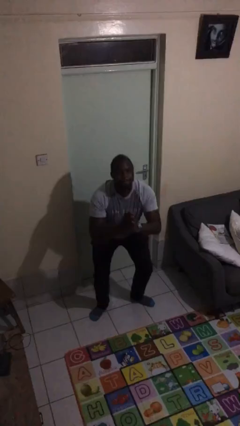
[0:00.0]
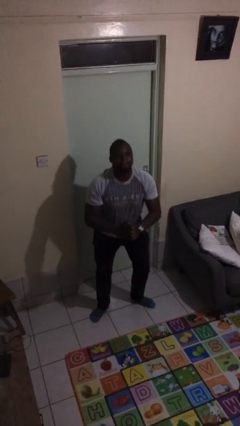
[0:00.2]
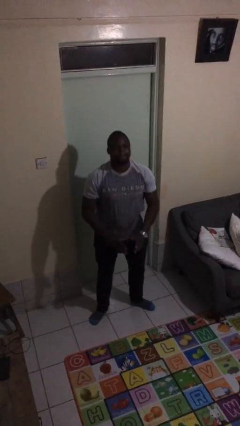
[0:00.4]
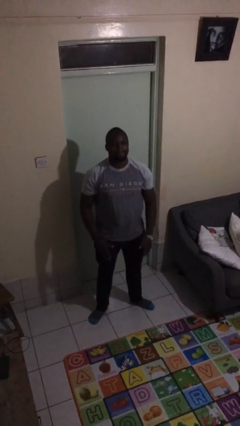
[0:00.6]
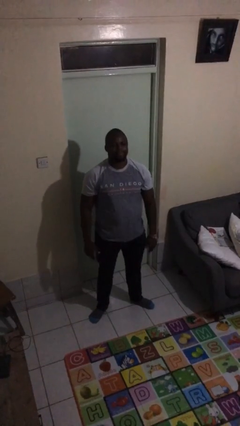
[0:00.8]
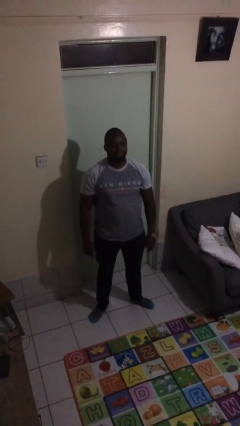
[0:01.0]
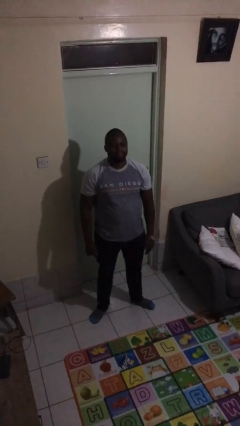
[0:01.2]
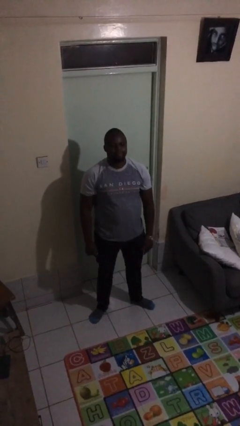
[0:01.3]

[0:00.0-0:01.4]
person stands up

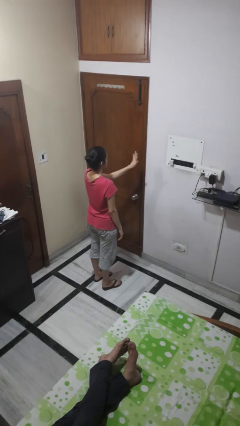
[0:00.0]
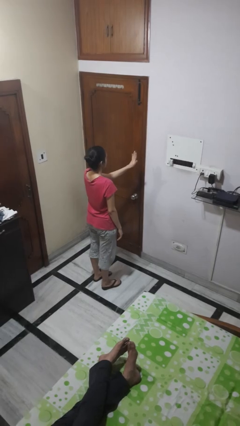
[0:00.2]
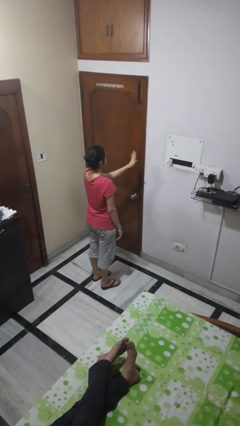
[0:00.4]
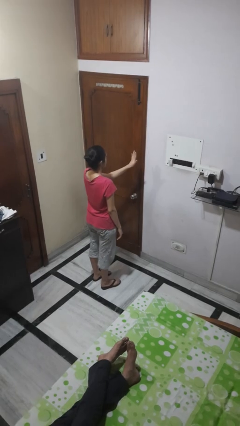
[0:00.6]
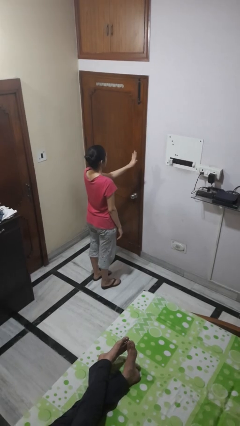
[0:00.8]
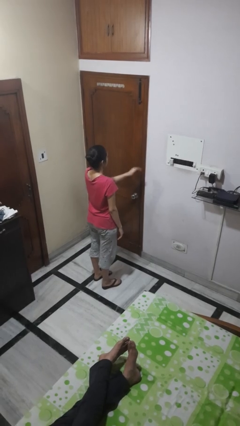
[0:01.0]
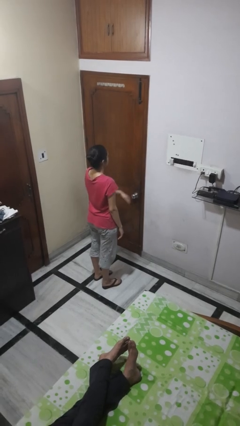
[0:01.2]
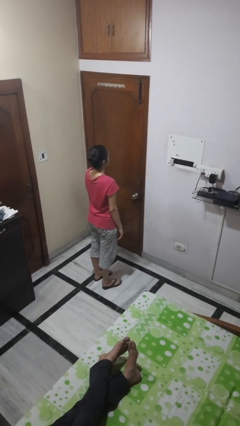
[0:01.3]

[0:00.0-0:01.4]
person gestures stop

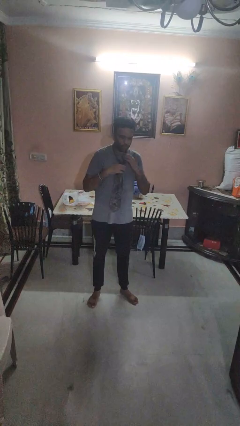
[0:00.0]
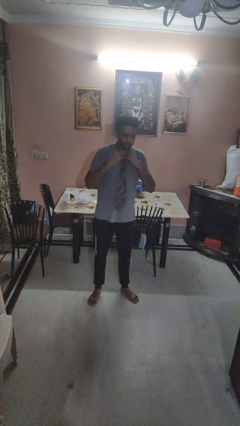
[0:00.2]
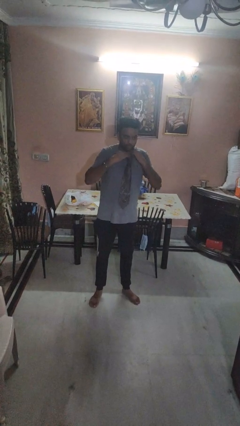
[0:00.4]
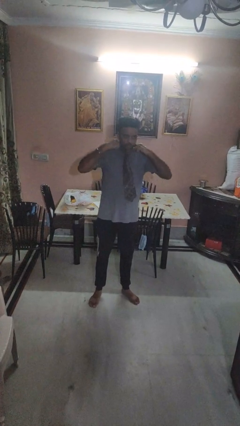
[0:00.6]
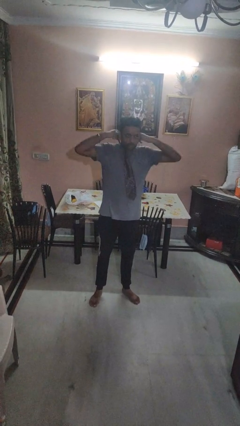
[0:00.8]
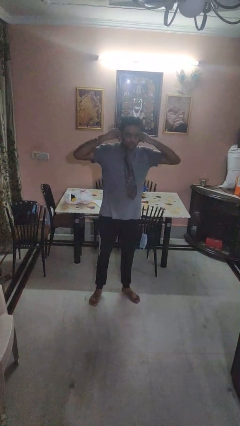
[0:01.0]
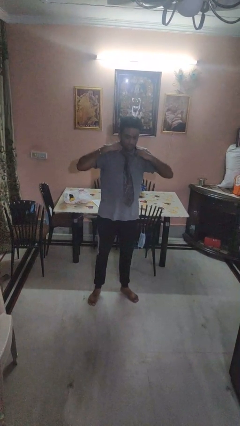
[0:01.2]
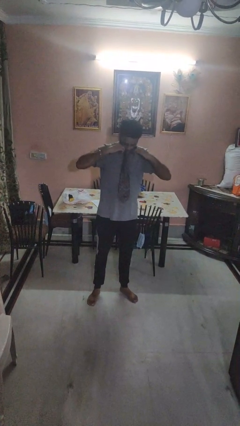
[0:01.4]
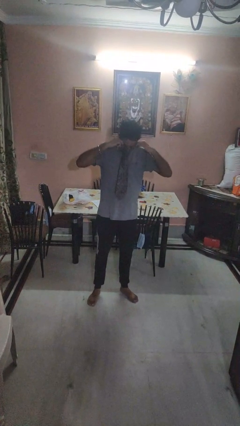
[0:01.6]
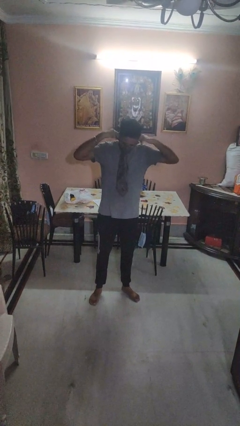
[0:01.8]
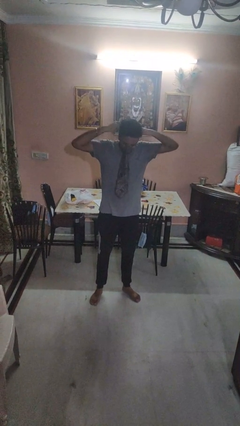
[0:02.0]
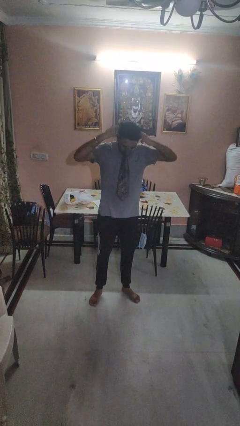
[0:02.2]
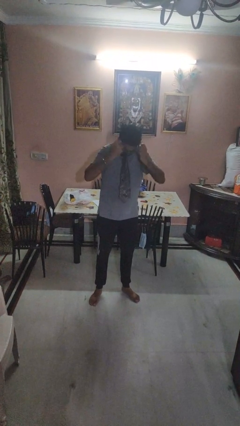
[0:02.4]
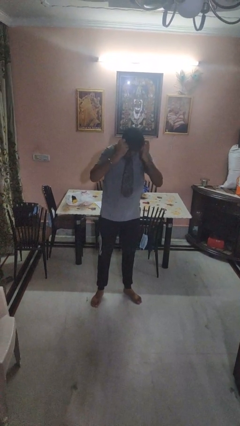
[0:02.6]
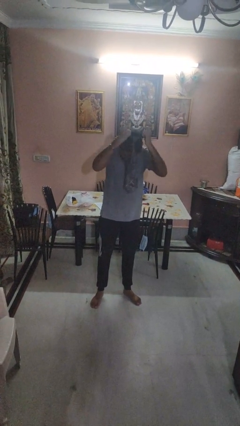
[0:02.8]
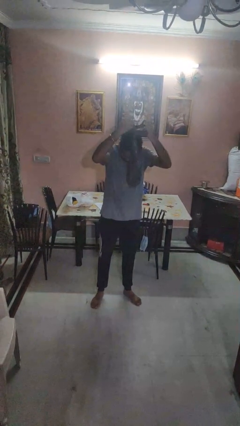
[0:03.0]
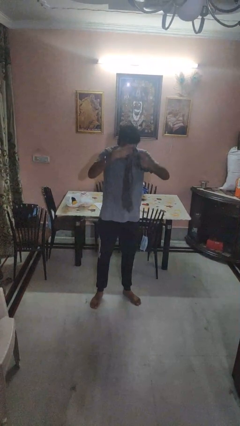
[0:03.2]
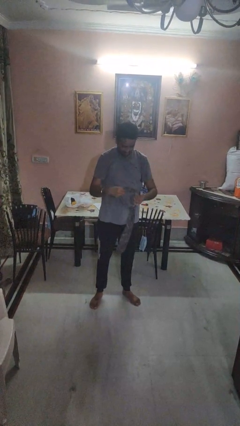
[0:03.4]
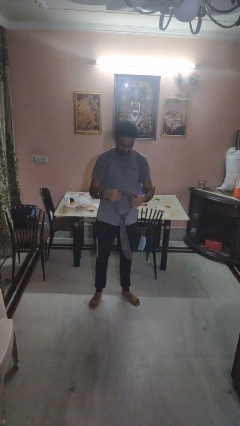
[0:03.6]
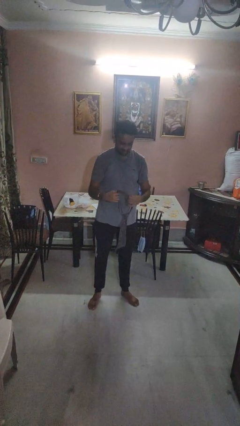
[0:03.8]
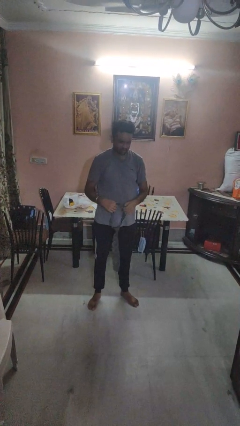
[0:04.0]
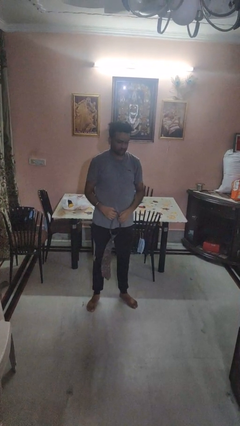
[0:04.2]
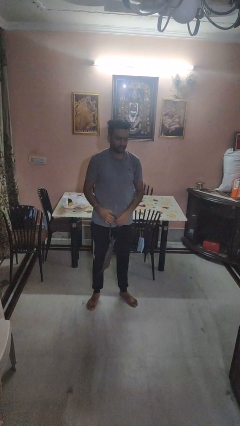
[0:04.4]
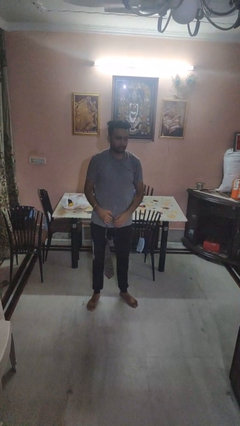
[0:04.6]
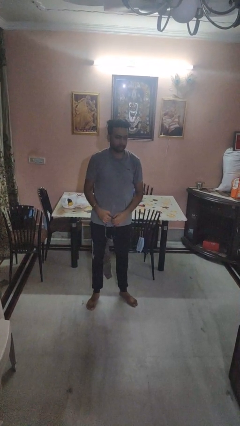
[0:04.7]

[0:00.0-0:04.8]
person takes off necktie

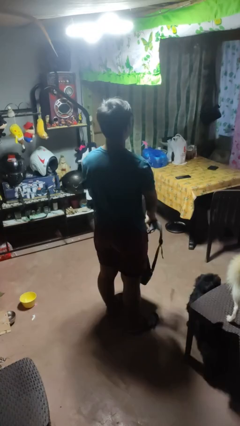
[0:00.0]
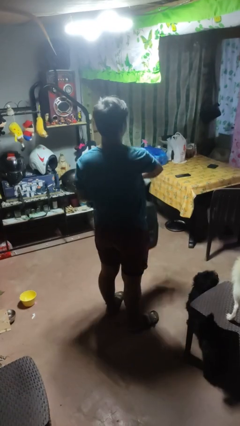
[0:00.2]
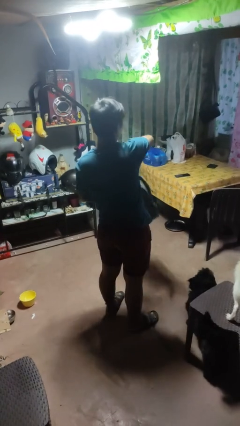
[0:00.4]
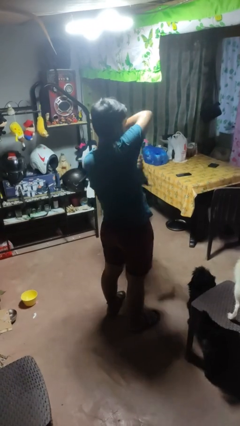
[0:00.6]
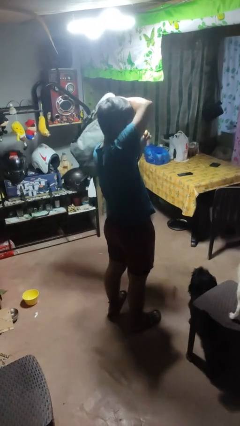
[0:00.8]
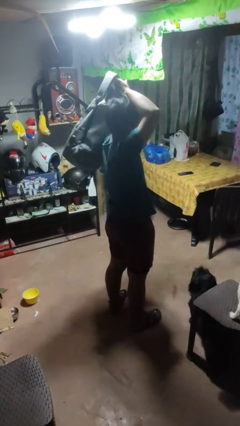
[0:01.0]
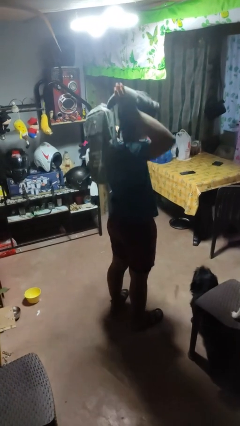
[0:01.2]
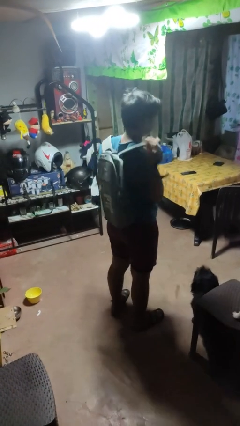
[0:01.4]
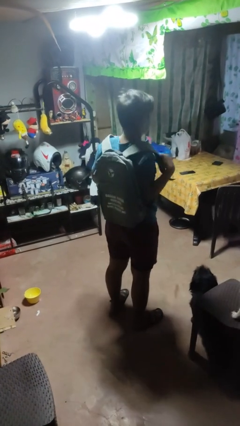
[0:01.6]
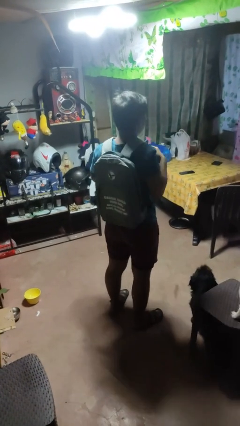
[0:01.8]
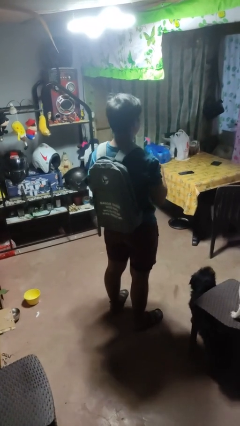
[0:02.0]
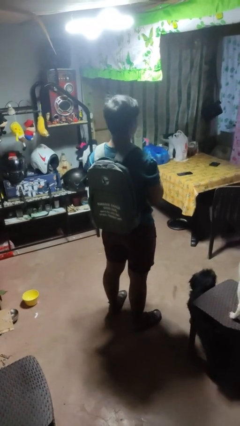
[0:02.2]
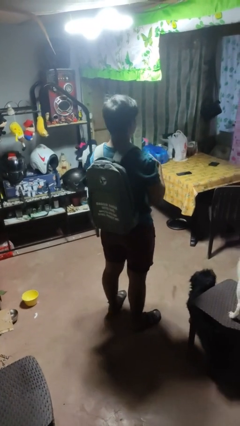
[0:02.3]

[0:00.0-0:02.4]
person puts on backpack

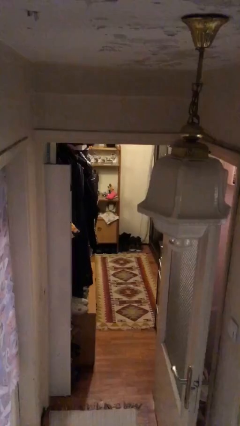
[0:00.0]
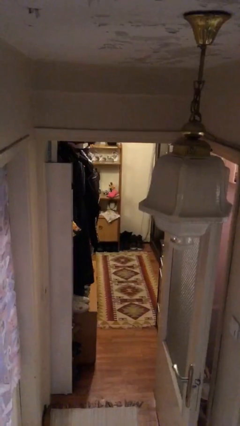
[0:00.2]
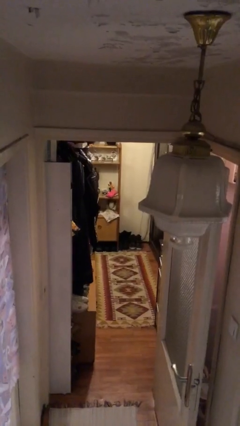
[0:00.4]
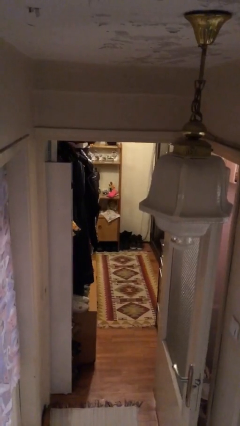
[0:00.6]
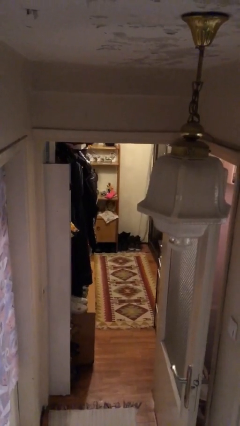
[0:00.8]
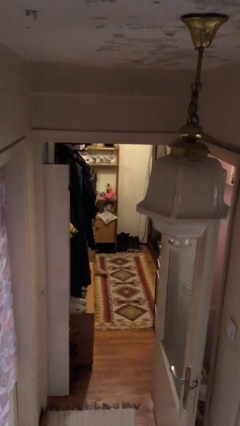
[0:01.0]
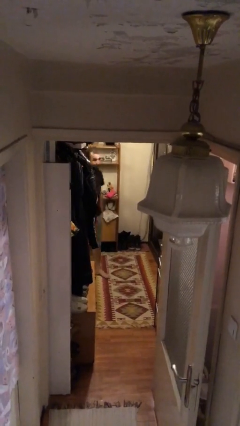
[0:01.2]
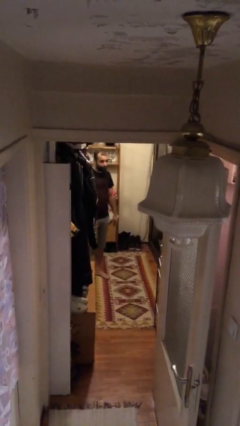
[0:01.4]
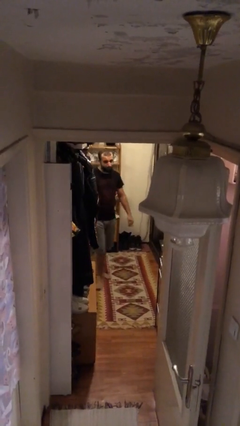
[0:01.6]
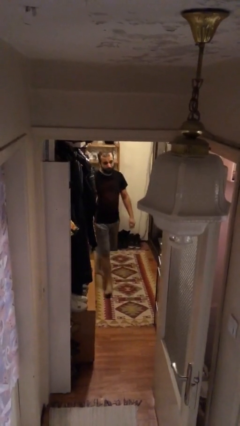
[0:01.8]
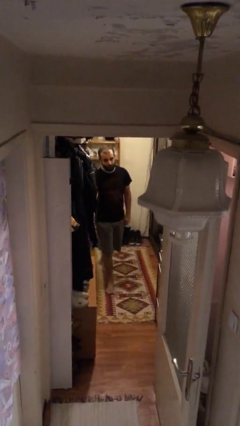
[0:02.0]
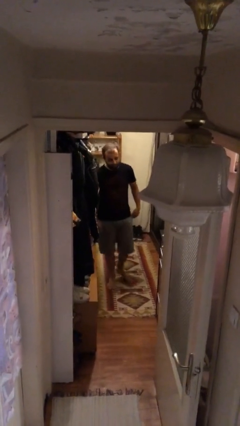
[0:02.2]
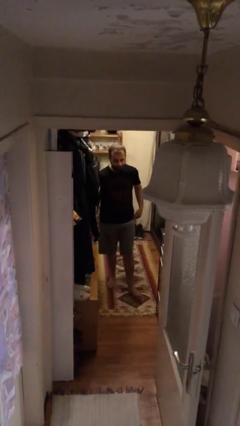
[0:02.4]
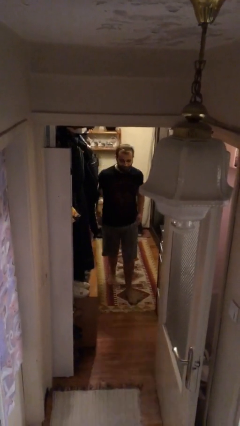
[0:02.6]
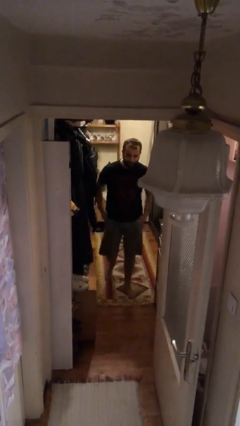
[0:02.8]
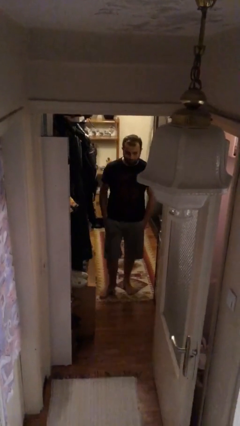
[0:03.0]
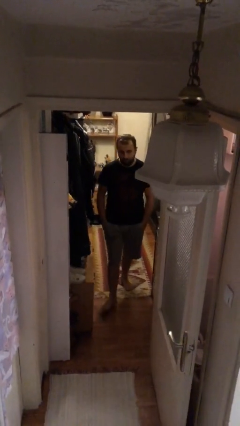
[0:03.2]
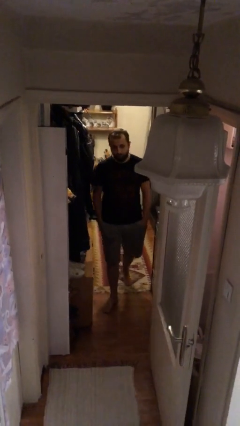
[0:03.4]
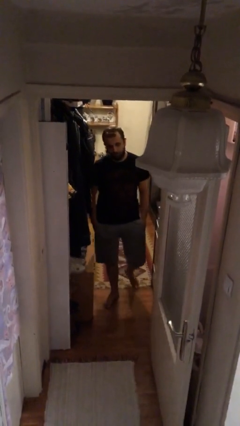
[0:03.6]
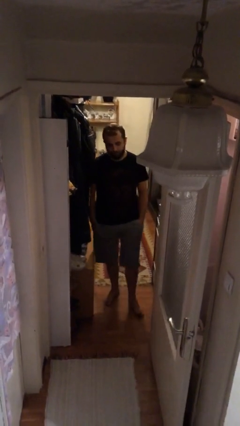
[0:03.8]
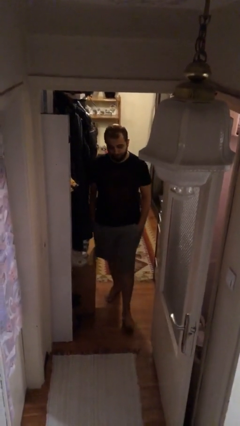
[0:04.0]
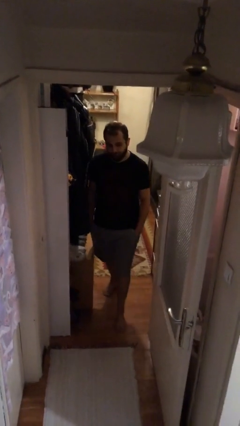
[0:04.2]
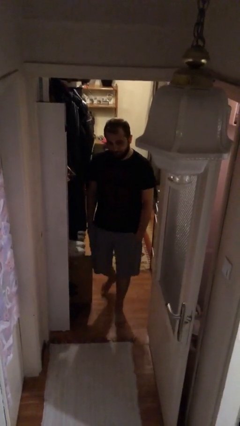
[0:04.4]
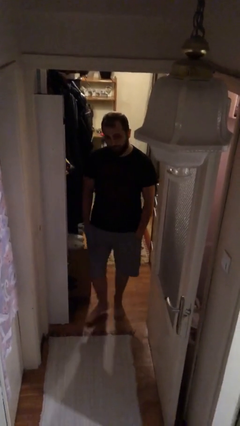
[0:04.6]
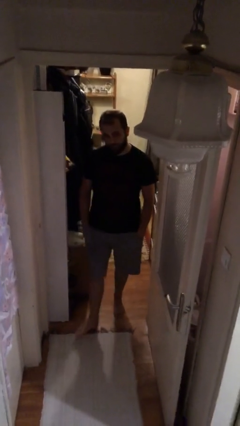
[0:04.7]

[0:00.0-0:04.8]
person enters scene through structure

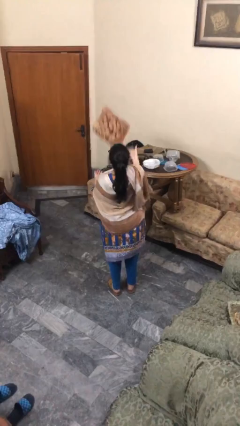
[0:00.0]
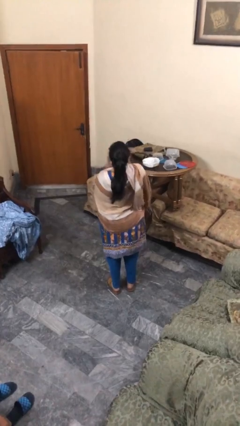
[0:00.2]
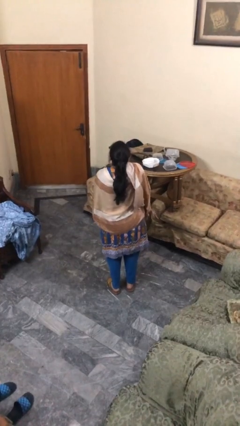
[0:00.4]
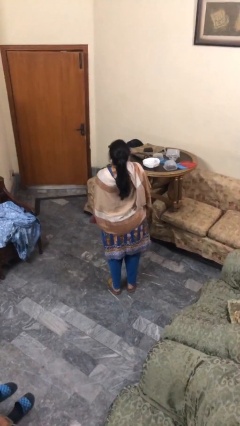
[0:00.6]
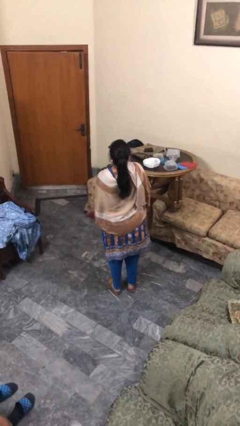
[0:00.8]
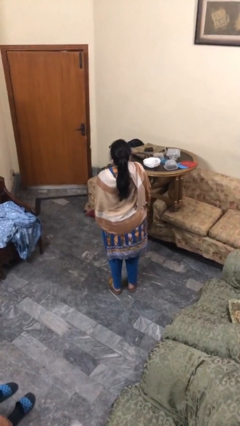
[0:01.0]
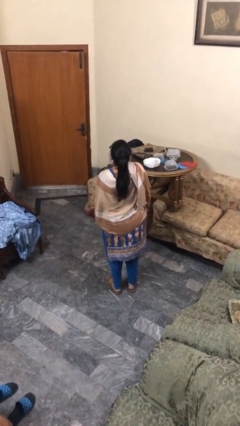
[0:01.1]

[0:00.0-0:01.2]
person catches dropped object

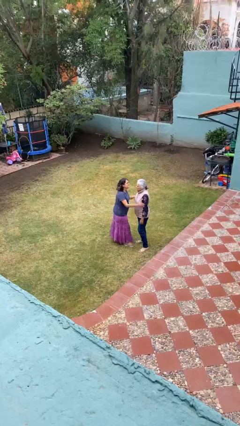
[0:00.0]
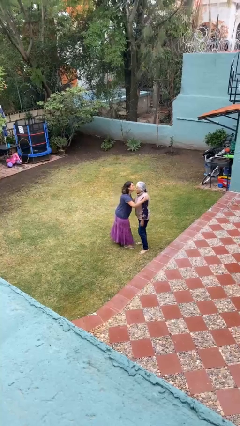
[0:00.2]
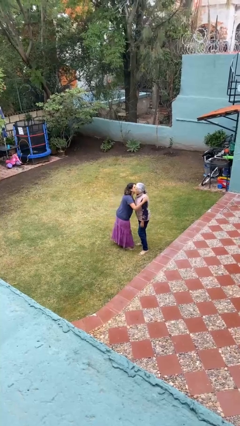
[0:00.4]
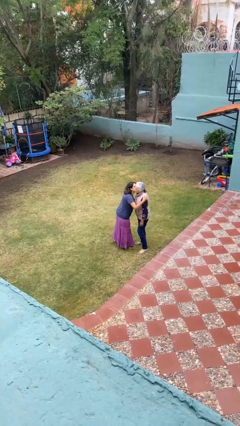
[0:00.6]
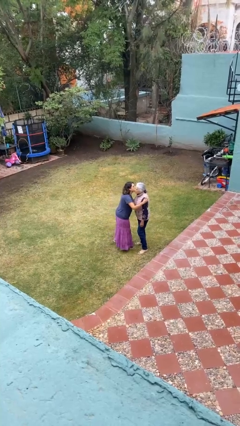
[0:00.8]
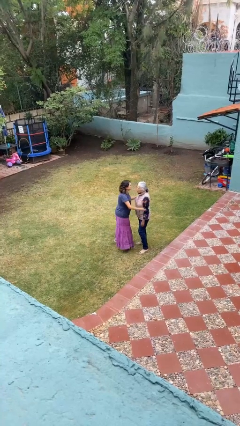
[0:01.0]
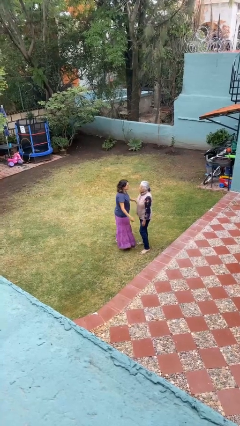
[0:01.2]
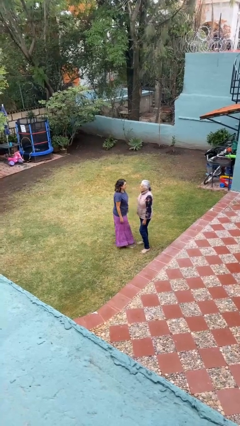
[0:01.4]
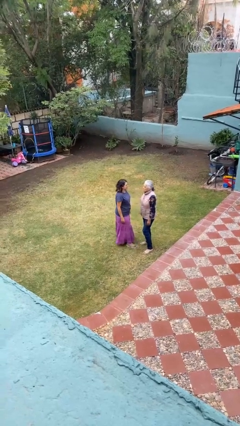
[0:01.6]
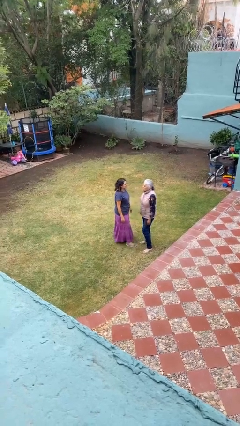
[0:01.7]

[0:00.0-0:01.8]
person kisses cheek of person
